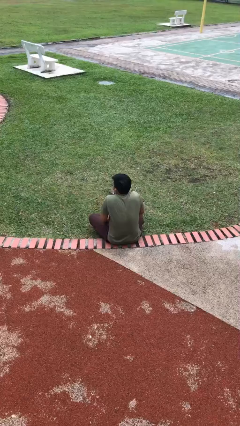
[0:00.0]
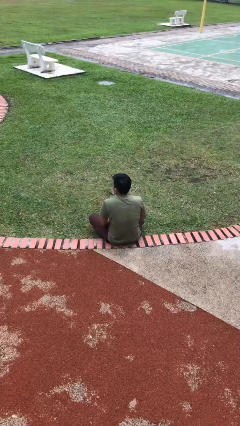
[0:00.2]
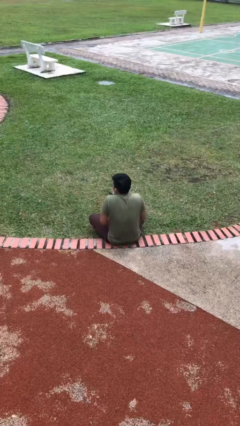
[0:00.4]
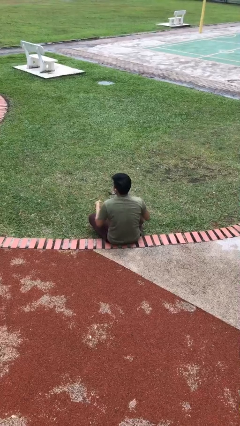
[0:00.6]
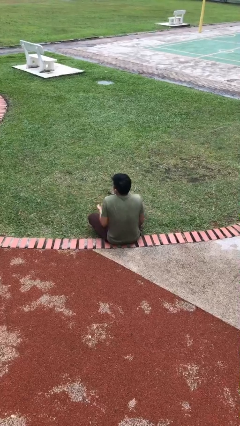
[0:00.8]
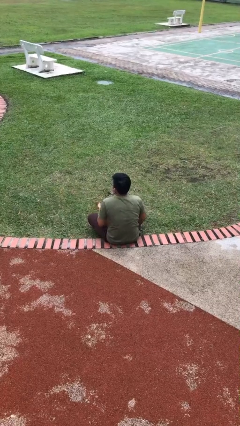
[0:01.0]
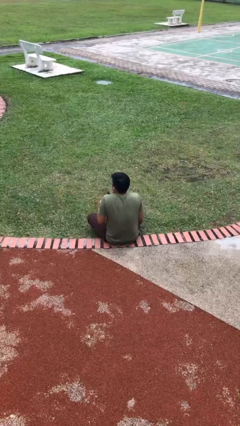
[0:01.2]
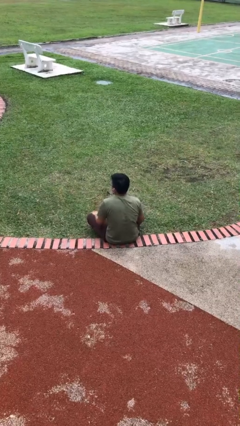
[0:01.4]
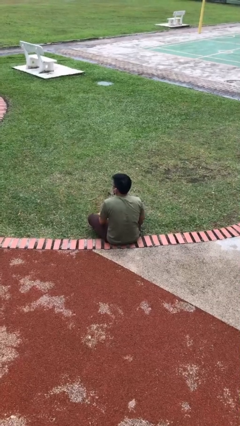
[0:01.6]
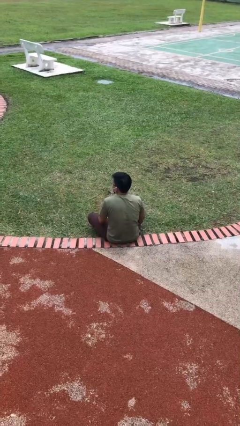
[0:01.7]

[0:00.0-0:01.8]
person shrugs

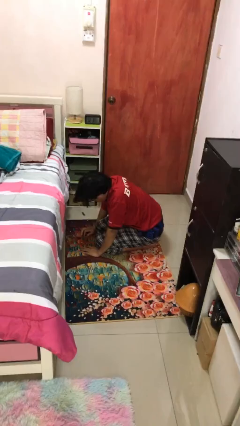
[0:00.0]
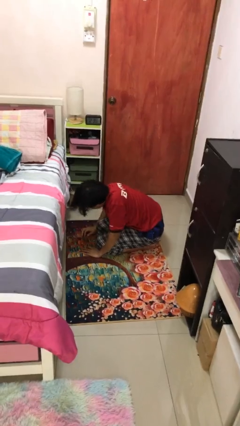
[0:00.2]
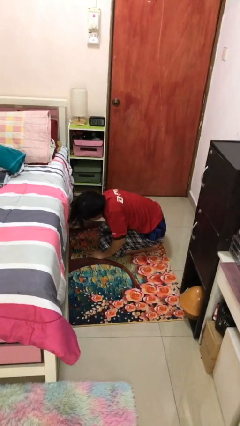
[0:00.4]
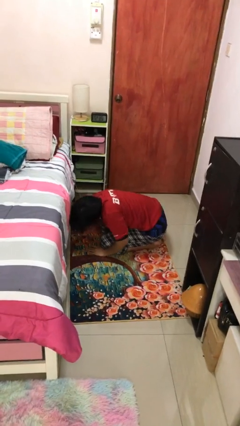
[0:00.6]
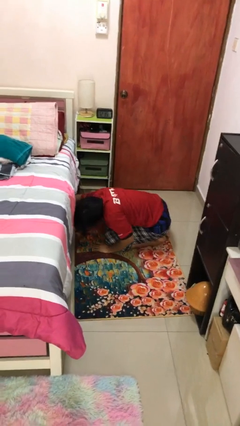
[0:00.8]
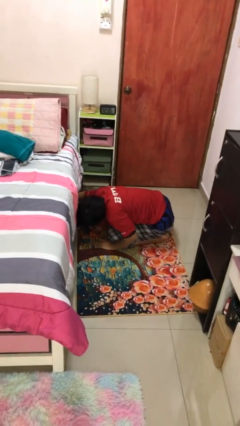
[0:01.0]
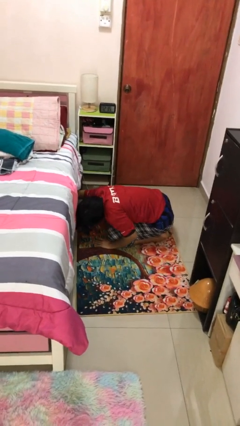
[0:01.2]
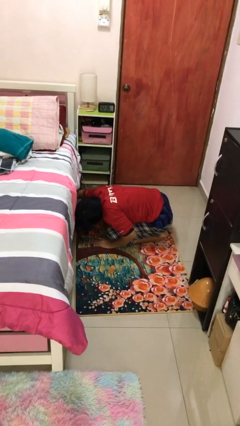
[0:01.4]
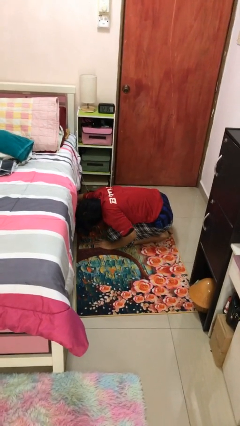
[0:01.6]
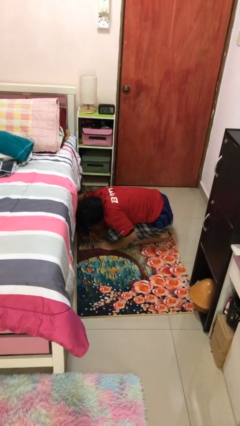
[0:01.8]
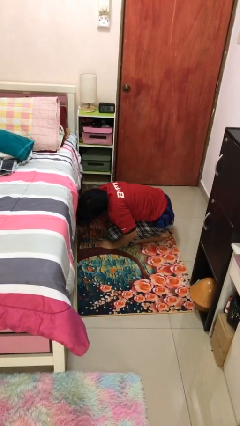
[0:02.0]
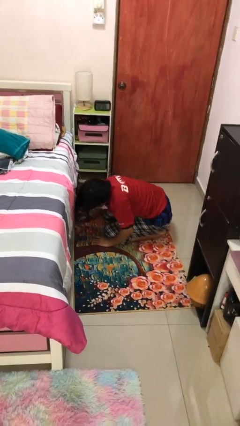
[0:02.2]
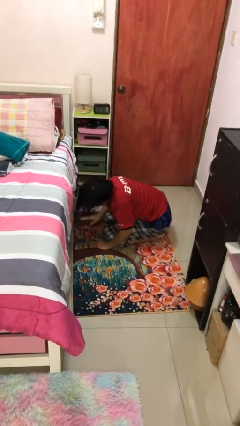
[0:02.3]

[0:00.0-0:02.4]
person searches under bed

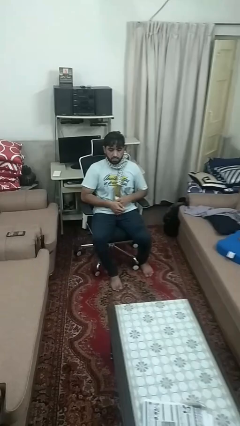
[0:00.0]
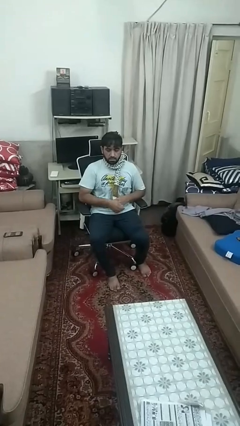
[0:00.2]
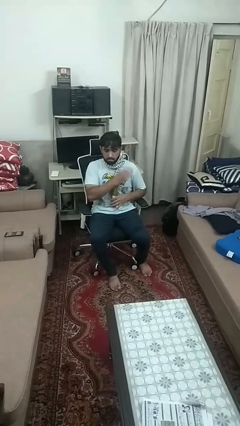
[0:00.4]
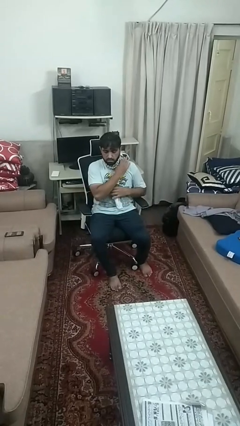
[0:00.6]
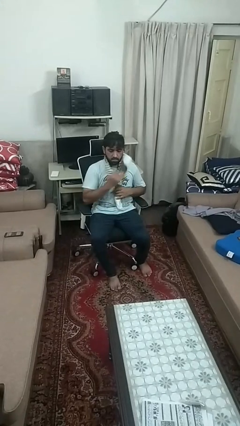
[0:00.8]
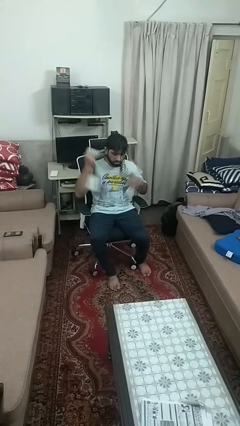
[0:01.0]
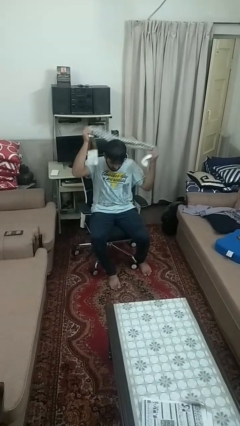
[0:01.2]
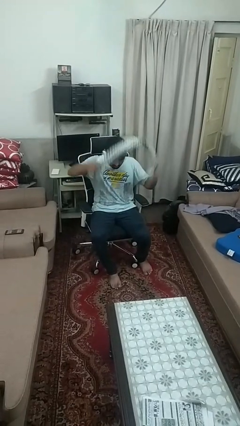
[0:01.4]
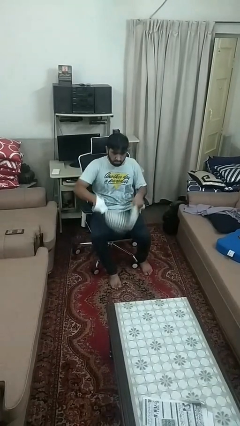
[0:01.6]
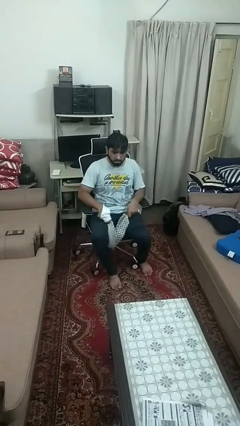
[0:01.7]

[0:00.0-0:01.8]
person takes off scarf

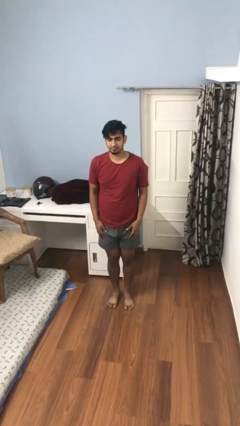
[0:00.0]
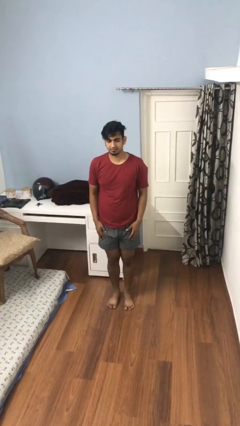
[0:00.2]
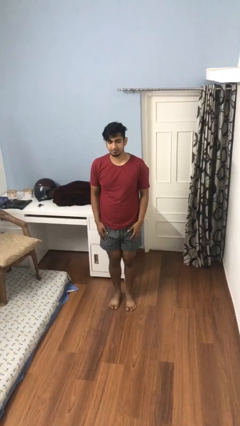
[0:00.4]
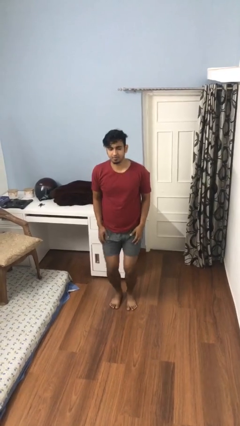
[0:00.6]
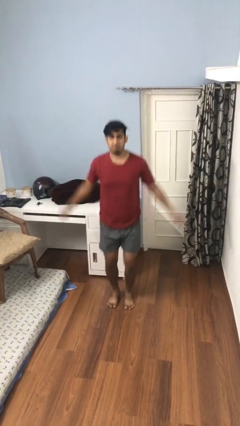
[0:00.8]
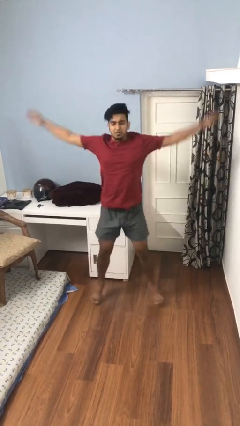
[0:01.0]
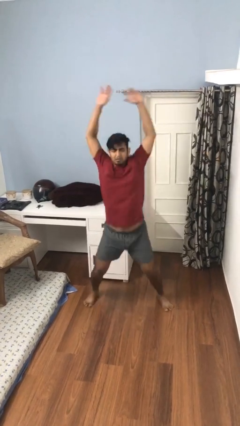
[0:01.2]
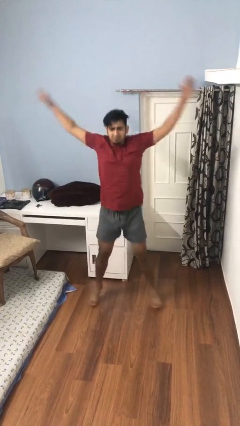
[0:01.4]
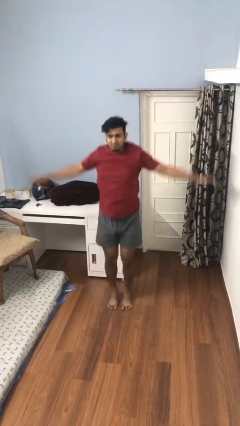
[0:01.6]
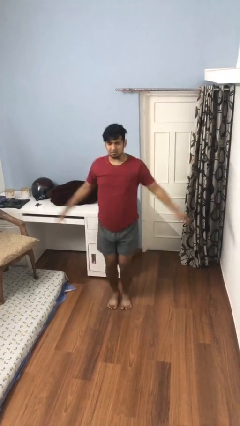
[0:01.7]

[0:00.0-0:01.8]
person exercises with jumping jacks

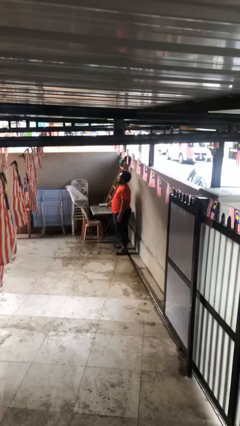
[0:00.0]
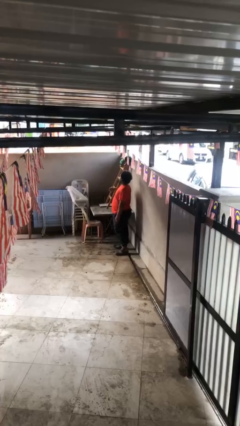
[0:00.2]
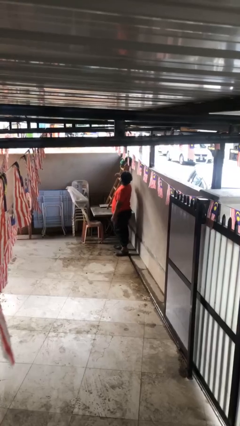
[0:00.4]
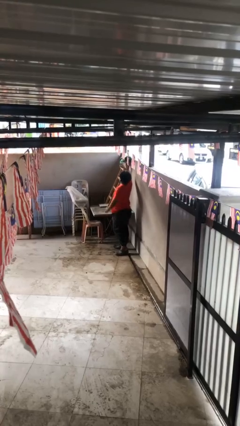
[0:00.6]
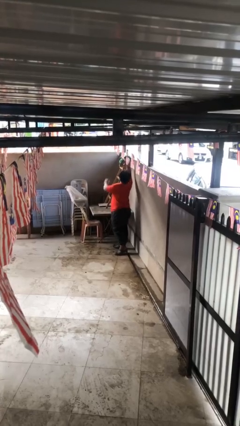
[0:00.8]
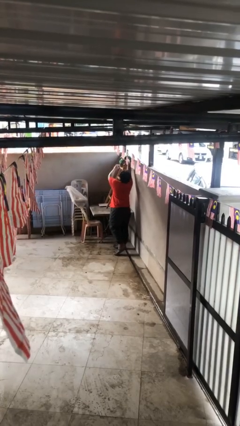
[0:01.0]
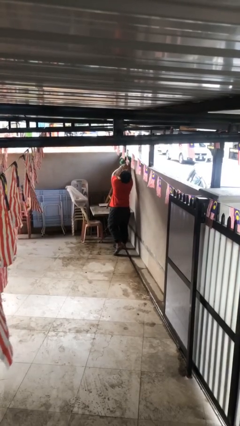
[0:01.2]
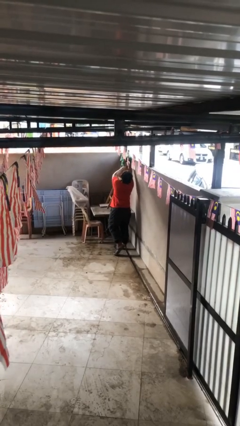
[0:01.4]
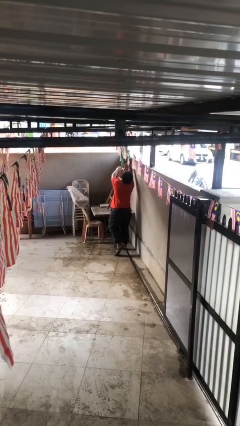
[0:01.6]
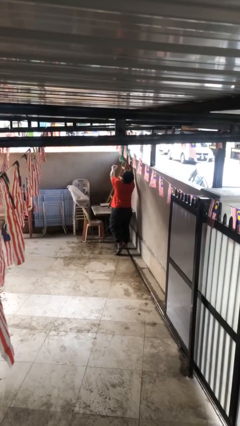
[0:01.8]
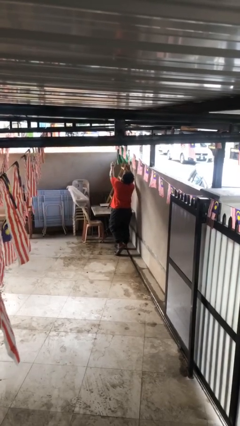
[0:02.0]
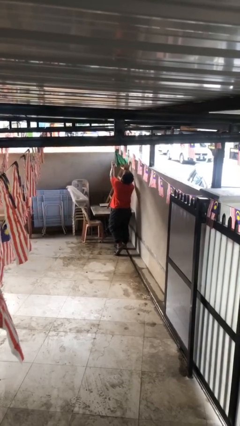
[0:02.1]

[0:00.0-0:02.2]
person picks up object from shelf

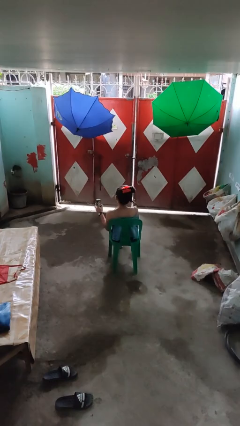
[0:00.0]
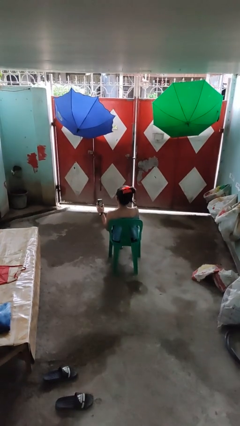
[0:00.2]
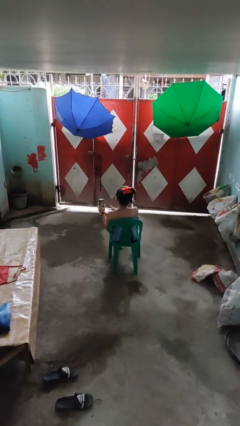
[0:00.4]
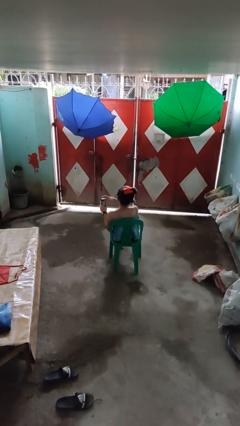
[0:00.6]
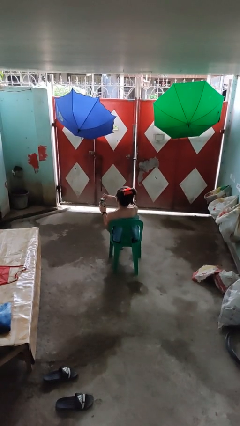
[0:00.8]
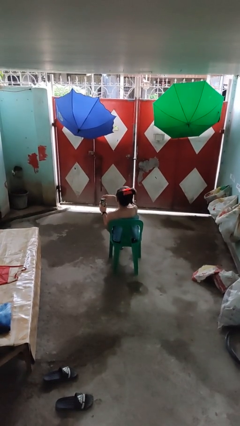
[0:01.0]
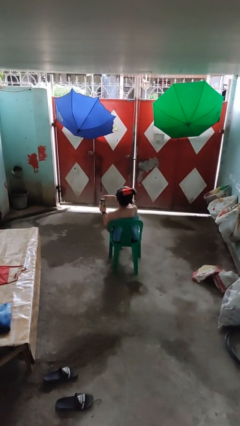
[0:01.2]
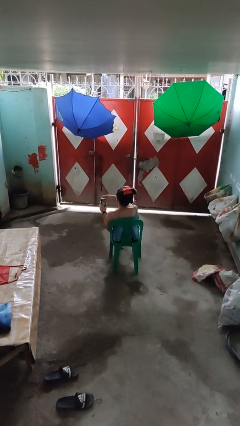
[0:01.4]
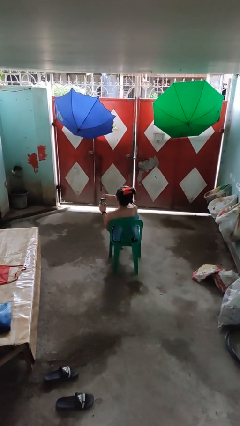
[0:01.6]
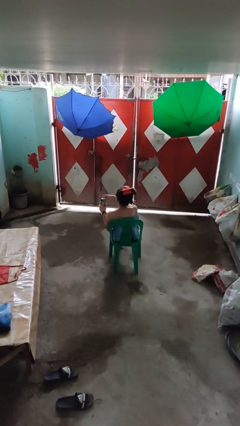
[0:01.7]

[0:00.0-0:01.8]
person opens beverage can

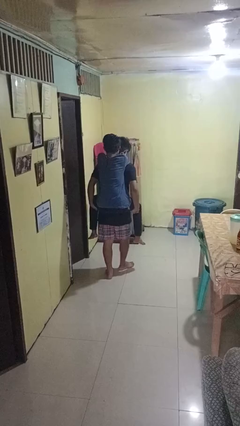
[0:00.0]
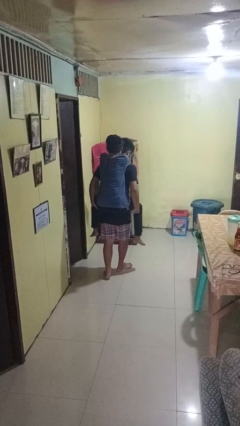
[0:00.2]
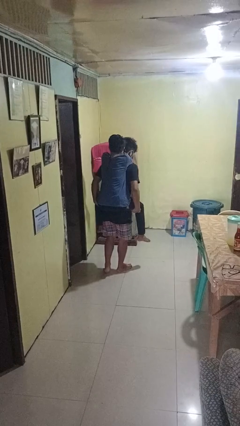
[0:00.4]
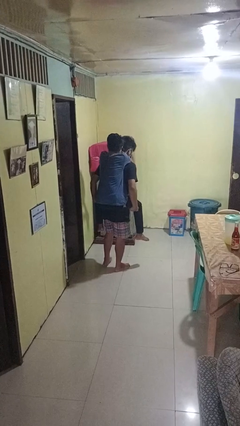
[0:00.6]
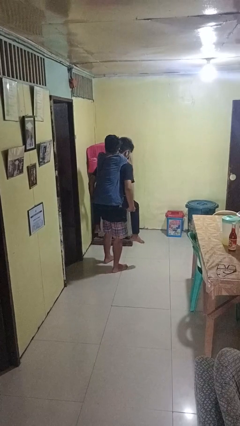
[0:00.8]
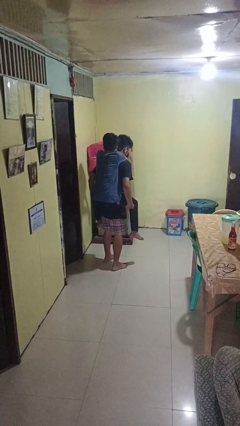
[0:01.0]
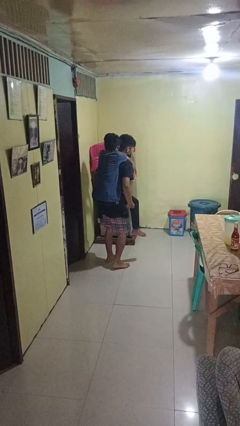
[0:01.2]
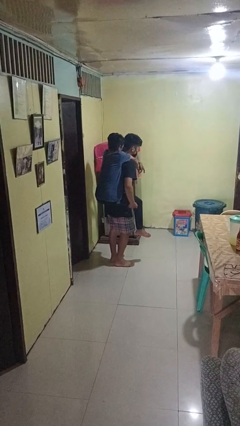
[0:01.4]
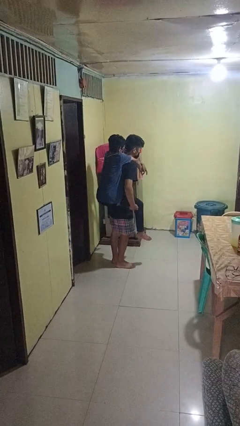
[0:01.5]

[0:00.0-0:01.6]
person carries person on back

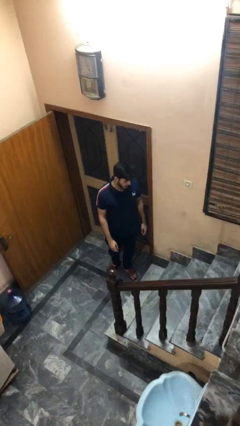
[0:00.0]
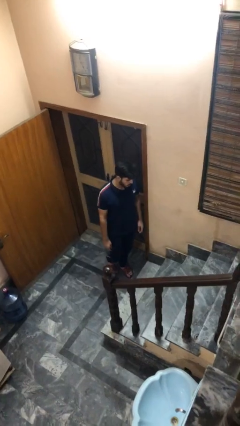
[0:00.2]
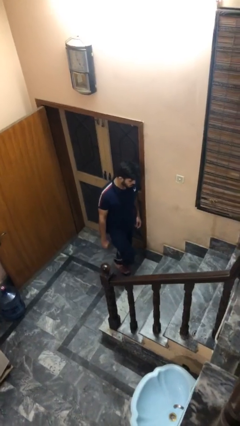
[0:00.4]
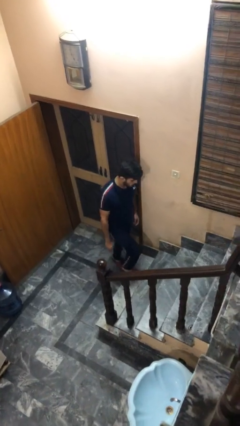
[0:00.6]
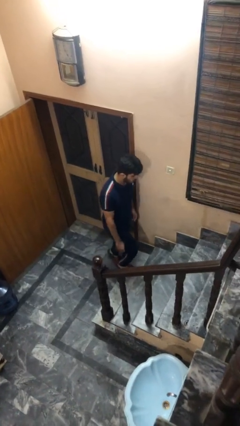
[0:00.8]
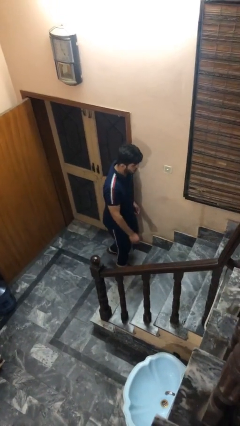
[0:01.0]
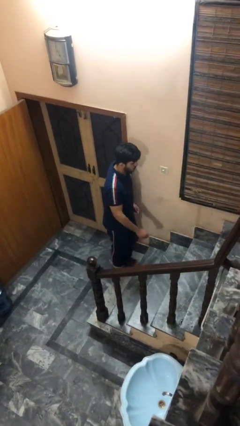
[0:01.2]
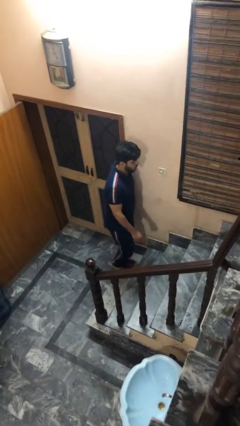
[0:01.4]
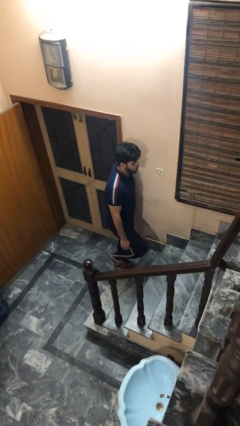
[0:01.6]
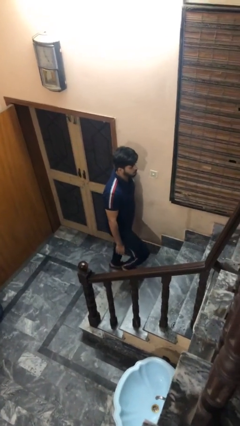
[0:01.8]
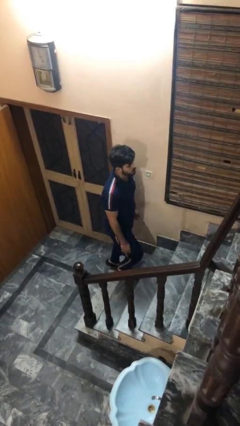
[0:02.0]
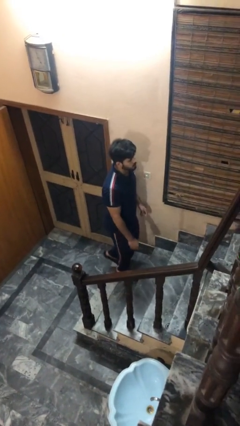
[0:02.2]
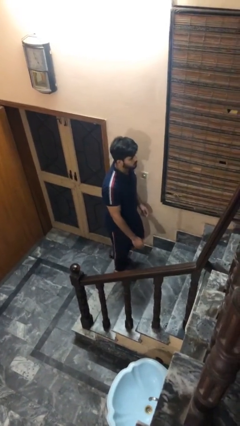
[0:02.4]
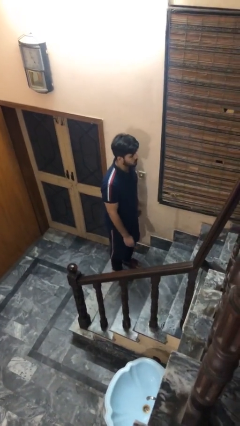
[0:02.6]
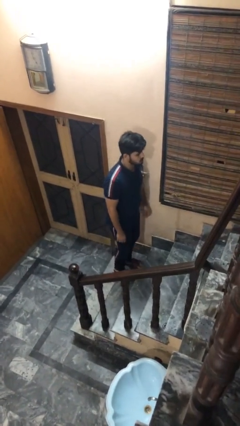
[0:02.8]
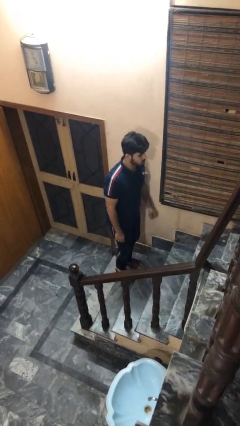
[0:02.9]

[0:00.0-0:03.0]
person climbs up stairs

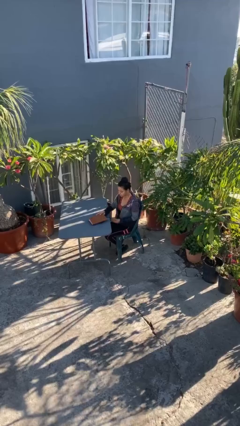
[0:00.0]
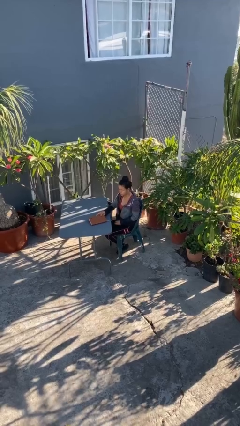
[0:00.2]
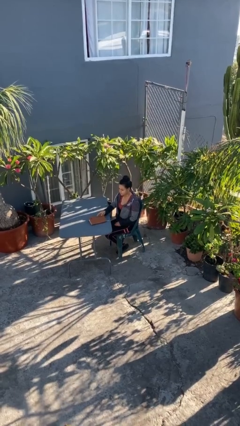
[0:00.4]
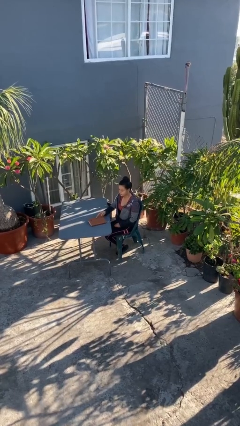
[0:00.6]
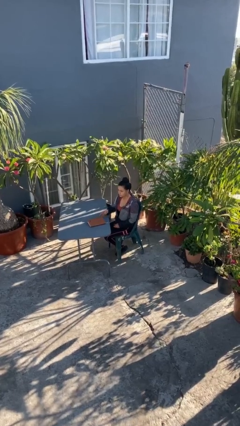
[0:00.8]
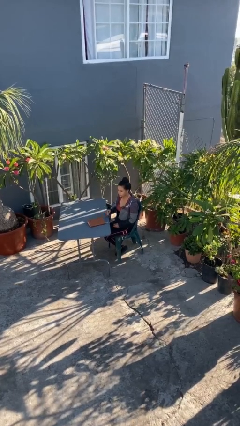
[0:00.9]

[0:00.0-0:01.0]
person puts down object on table
